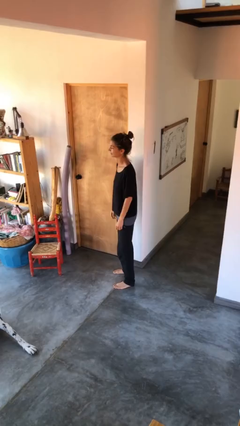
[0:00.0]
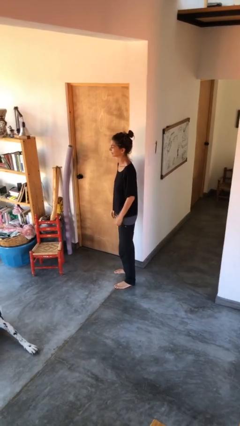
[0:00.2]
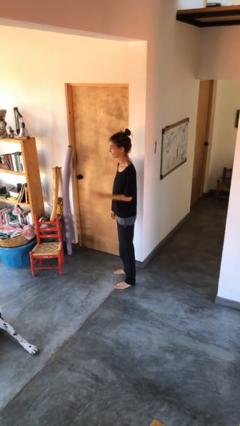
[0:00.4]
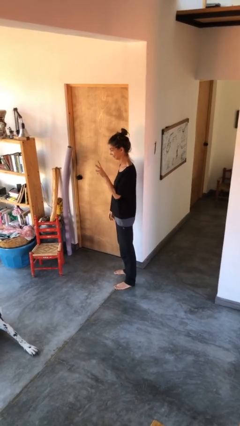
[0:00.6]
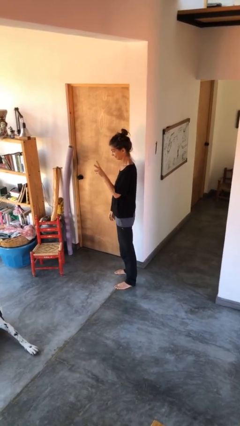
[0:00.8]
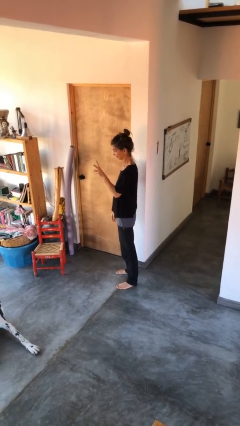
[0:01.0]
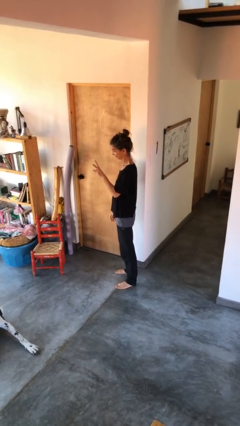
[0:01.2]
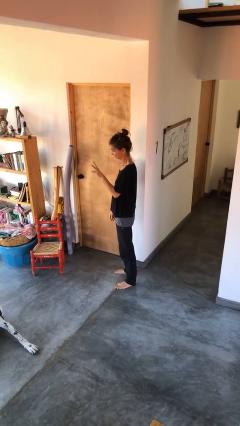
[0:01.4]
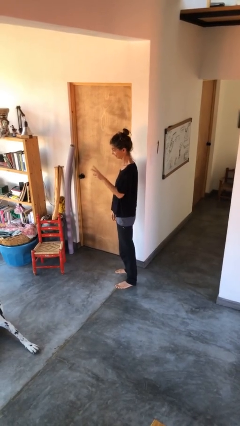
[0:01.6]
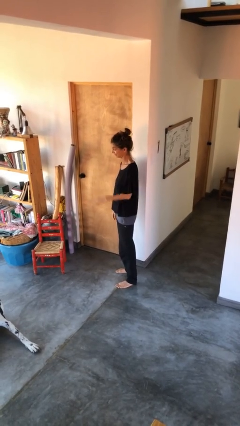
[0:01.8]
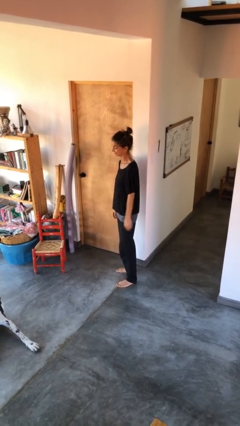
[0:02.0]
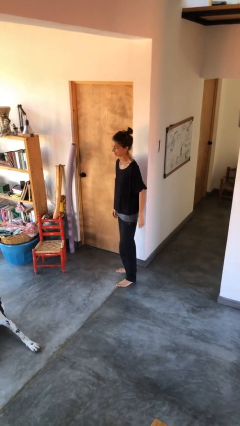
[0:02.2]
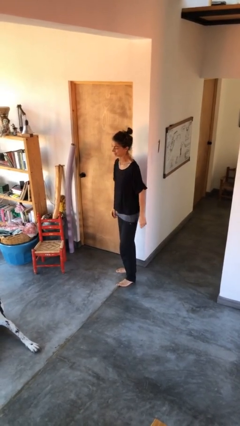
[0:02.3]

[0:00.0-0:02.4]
person gestures peace

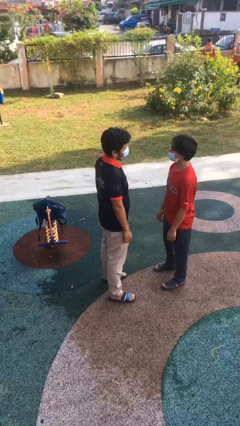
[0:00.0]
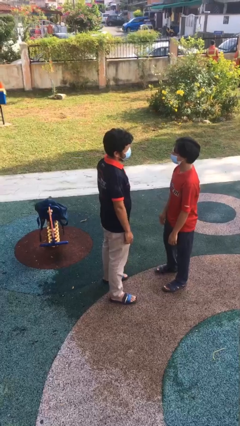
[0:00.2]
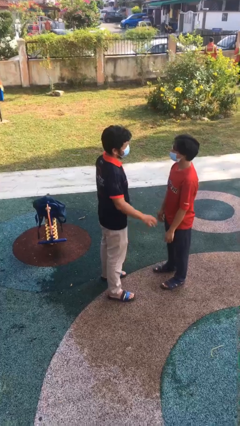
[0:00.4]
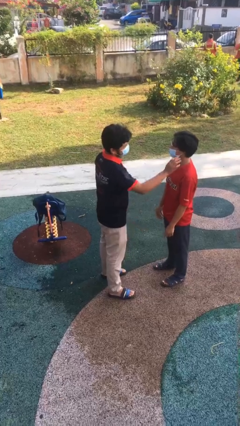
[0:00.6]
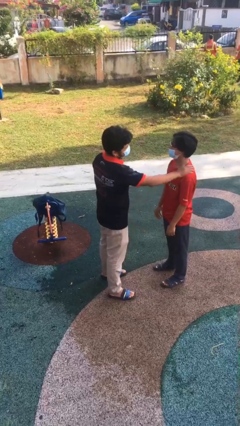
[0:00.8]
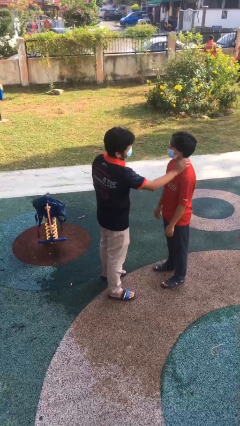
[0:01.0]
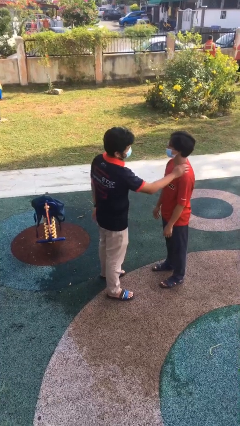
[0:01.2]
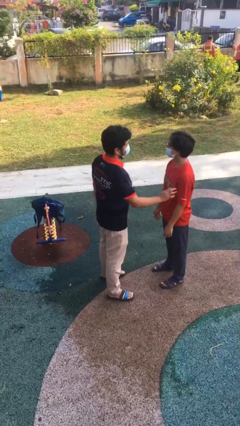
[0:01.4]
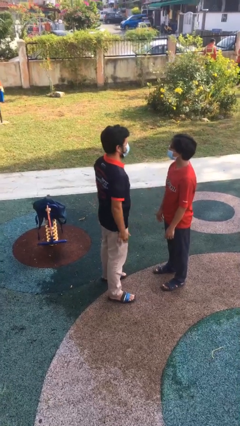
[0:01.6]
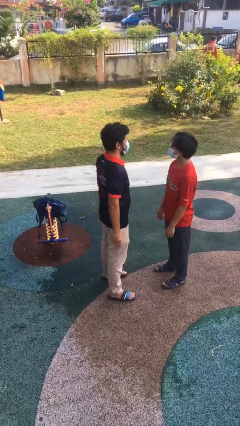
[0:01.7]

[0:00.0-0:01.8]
person pounds shoulders of person

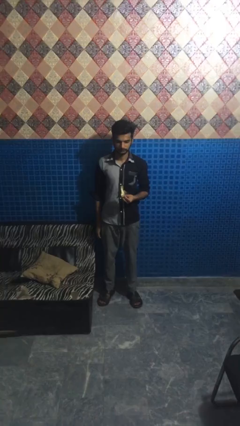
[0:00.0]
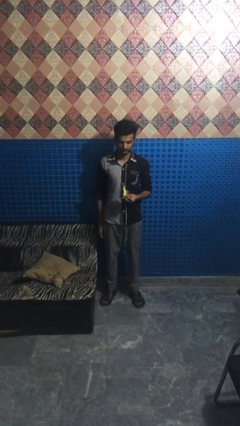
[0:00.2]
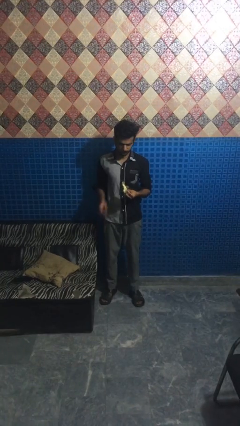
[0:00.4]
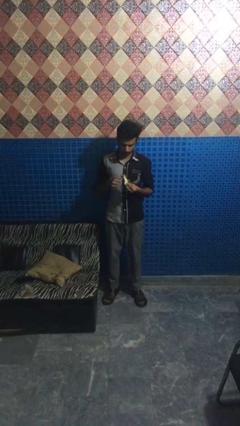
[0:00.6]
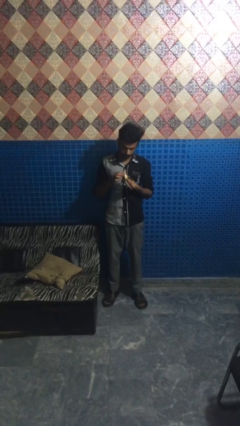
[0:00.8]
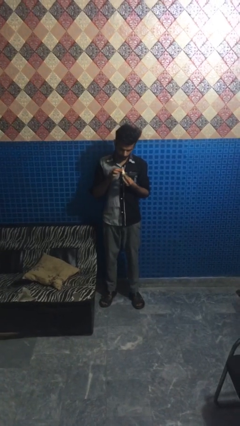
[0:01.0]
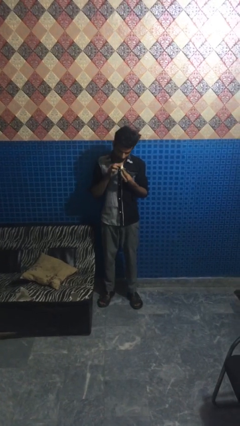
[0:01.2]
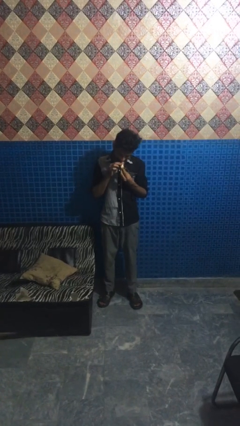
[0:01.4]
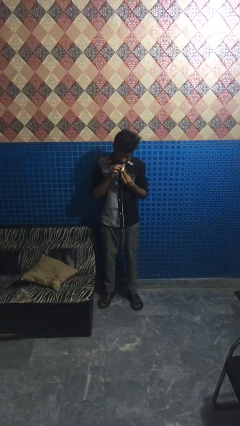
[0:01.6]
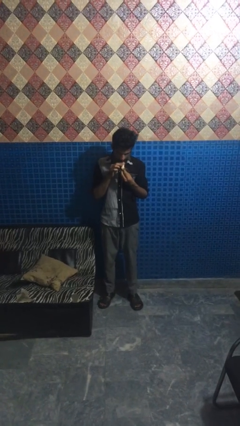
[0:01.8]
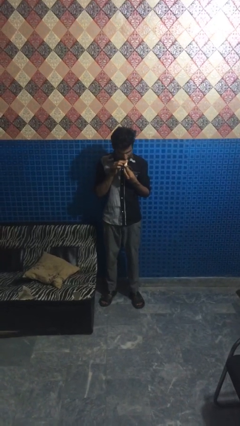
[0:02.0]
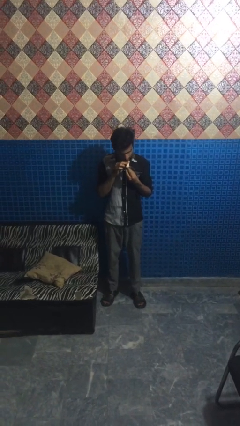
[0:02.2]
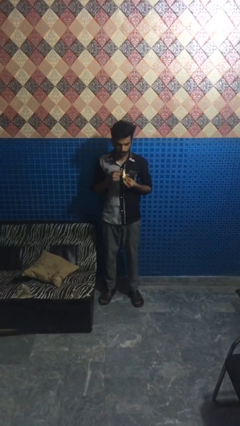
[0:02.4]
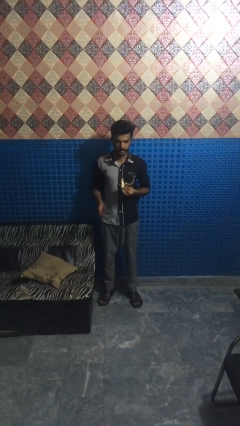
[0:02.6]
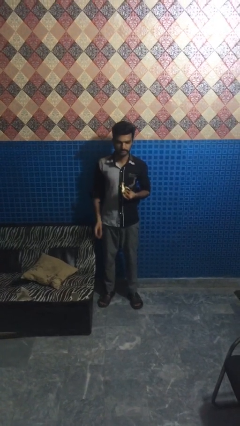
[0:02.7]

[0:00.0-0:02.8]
person eats banana

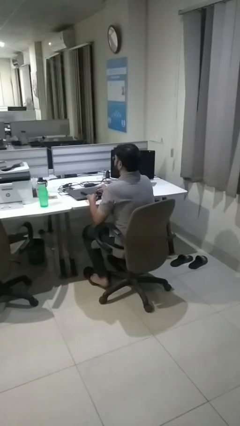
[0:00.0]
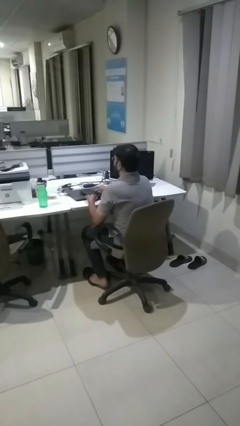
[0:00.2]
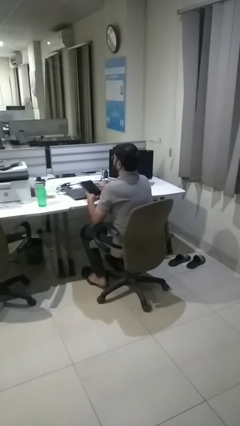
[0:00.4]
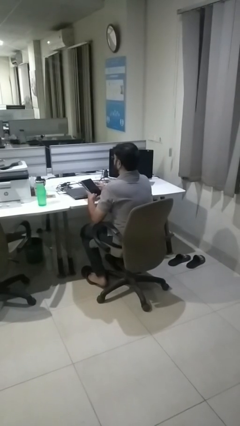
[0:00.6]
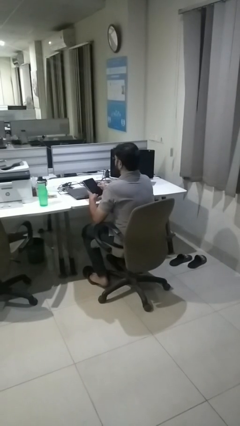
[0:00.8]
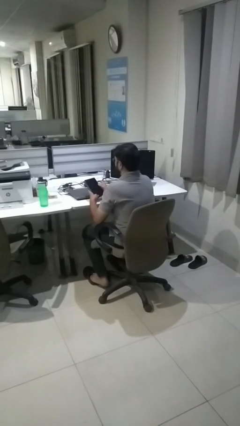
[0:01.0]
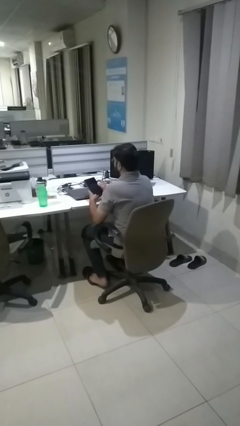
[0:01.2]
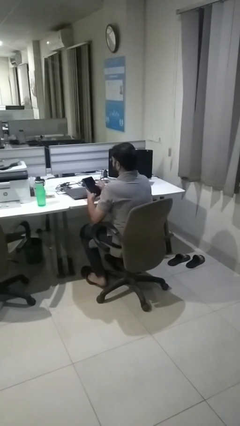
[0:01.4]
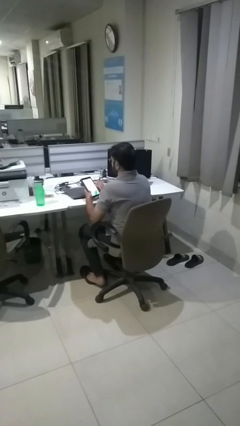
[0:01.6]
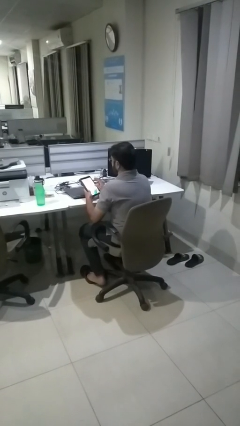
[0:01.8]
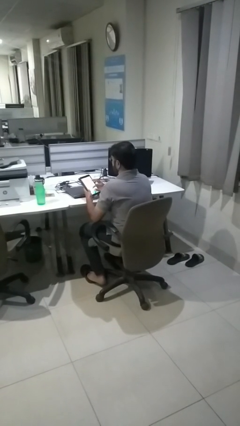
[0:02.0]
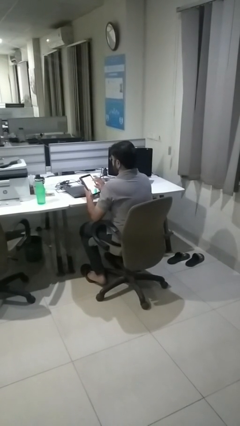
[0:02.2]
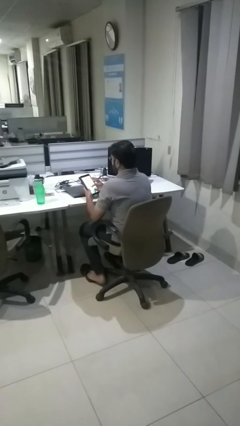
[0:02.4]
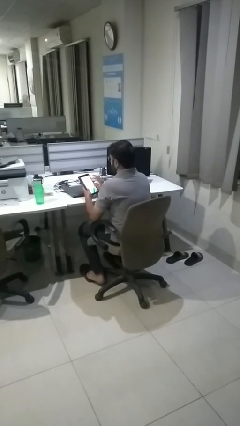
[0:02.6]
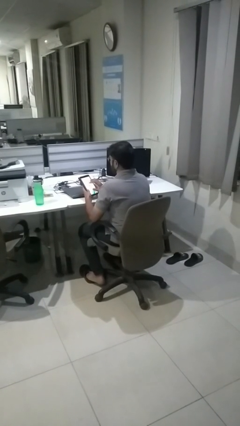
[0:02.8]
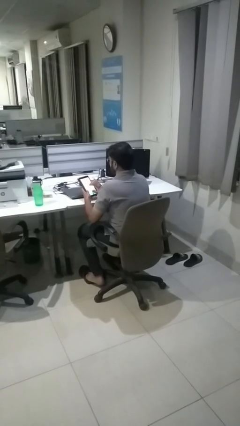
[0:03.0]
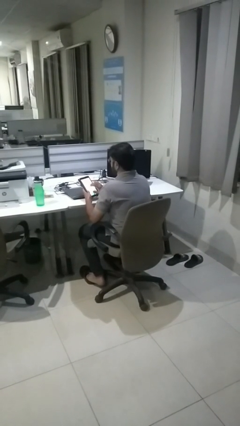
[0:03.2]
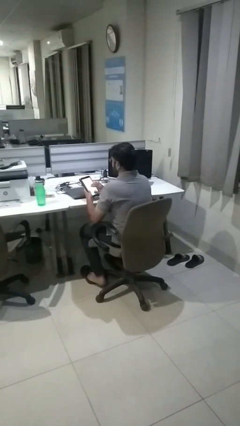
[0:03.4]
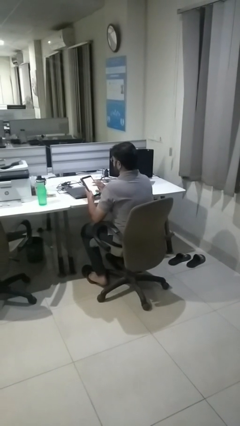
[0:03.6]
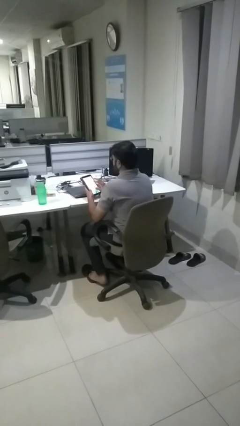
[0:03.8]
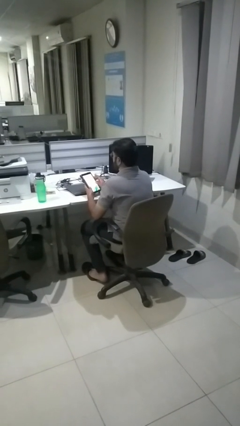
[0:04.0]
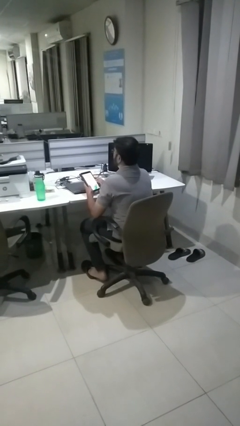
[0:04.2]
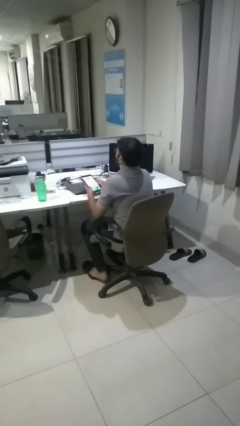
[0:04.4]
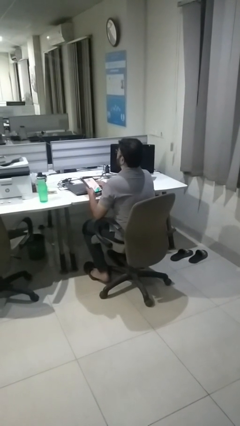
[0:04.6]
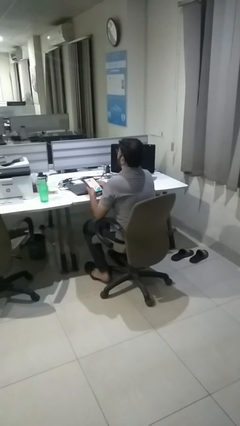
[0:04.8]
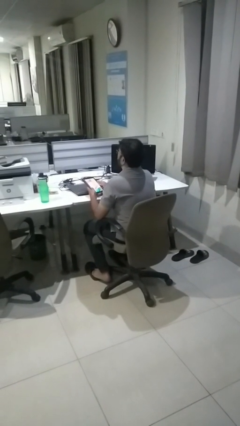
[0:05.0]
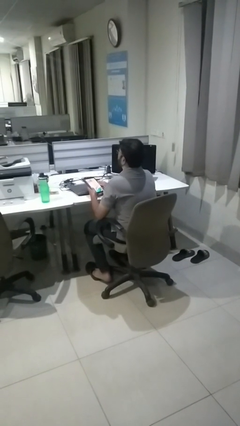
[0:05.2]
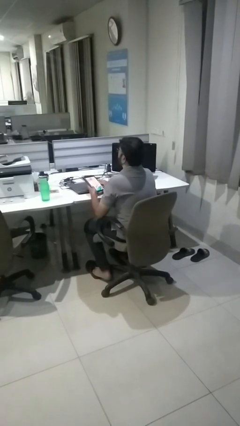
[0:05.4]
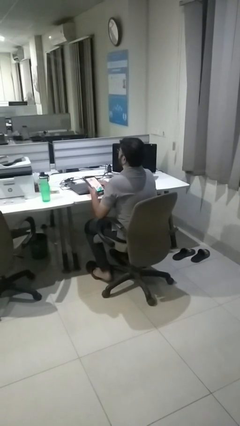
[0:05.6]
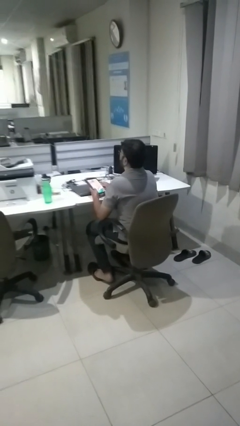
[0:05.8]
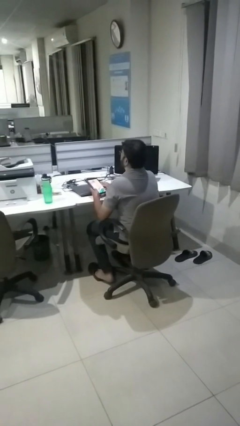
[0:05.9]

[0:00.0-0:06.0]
person interacts with tablet

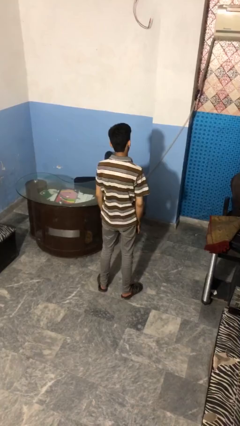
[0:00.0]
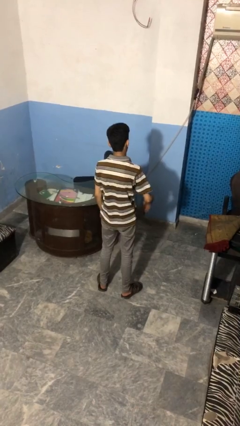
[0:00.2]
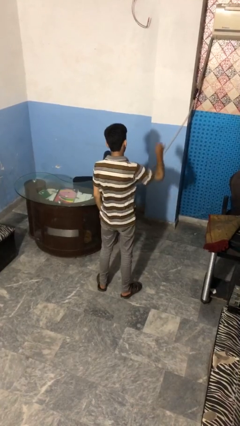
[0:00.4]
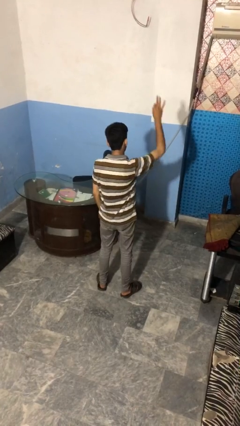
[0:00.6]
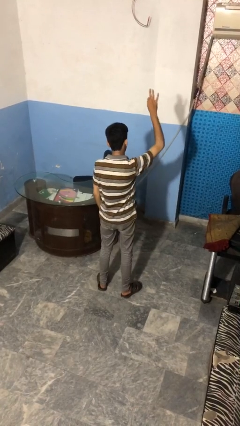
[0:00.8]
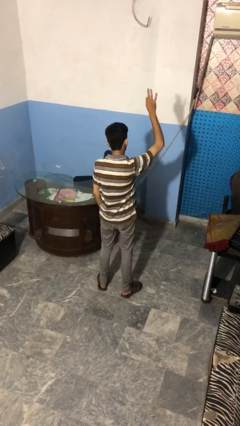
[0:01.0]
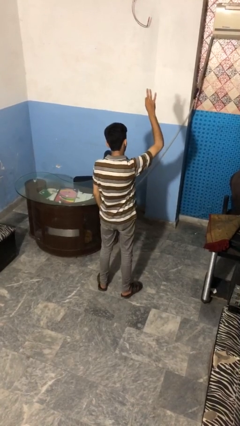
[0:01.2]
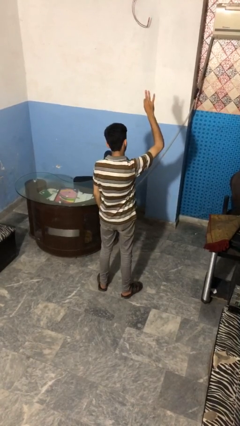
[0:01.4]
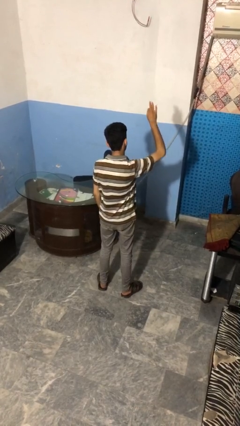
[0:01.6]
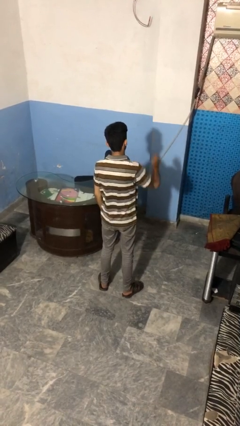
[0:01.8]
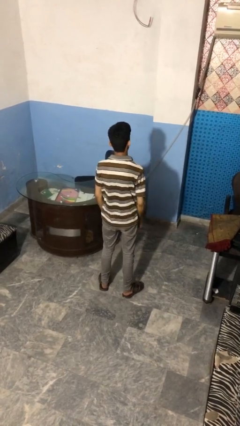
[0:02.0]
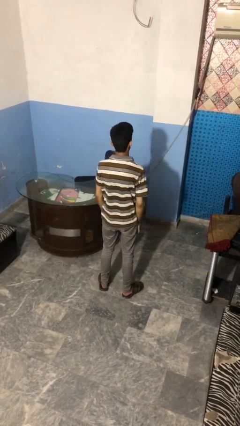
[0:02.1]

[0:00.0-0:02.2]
person gestures number three

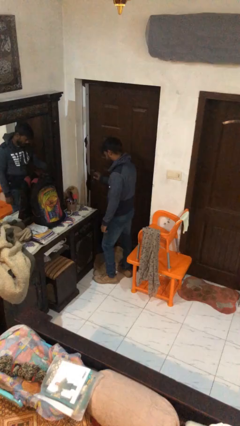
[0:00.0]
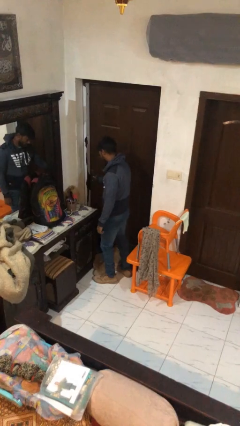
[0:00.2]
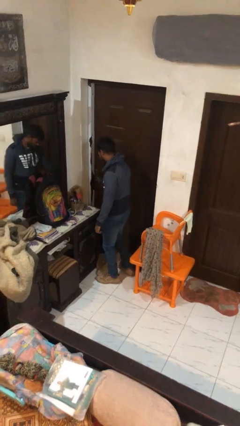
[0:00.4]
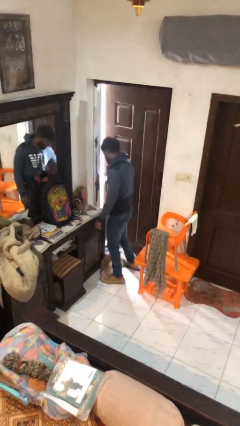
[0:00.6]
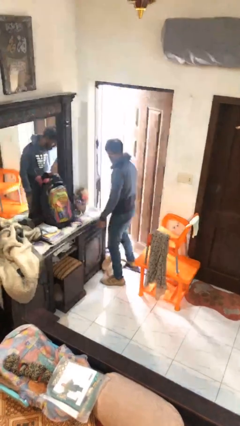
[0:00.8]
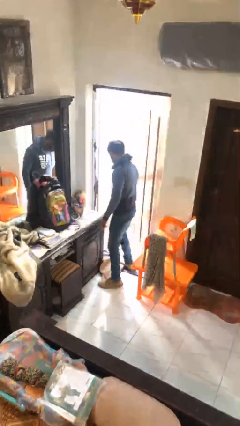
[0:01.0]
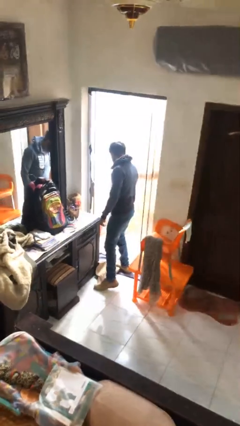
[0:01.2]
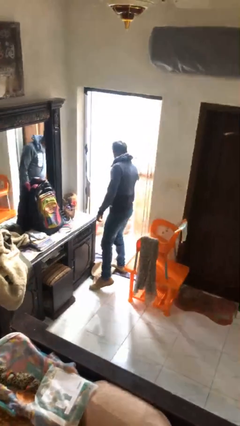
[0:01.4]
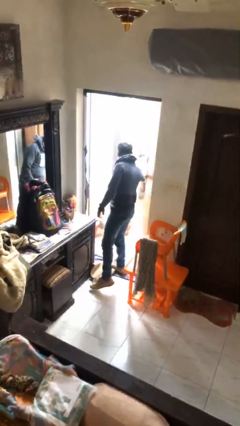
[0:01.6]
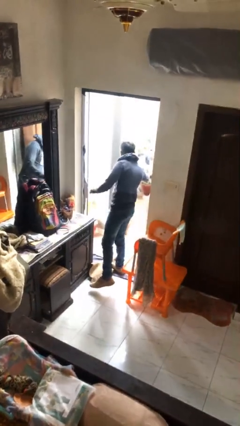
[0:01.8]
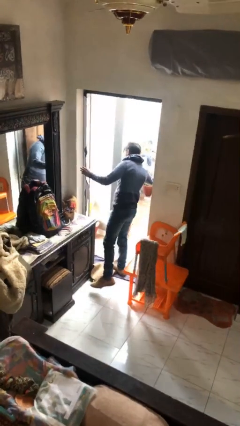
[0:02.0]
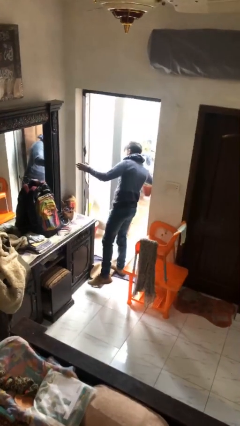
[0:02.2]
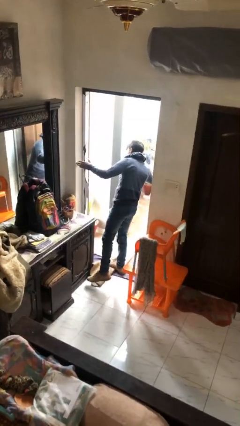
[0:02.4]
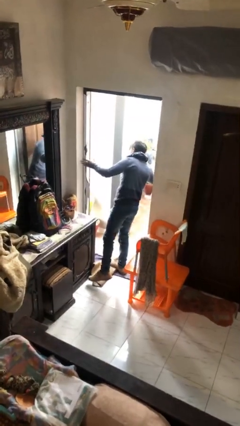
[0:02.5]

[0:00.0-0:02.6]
person opens facility door
